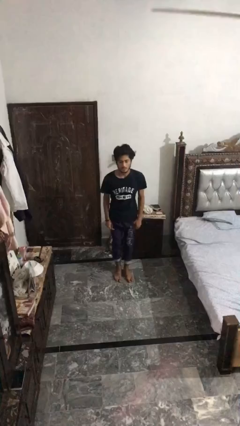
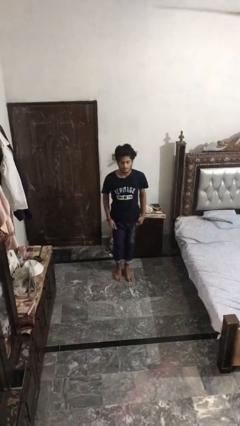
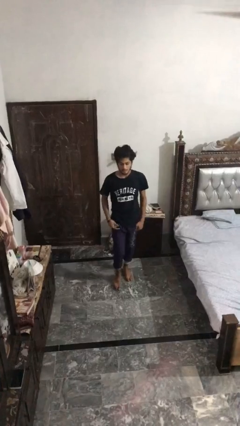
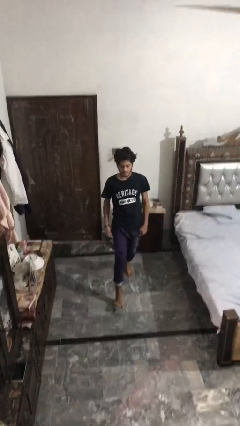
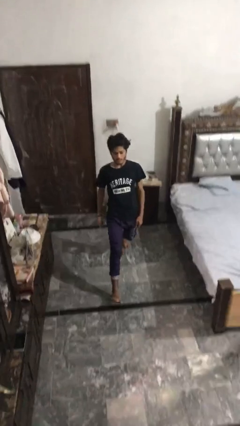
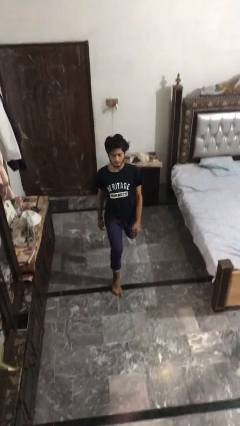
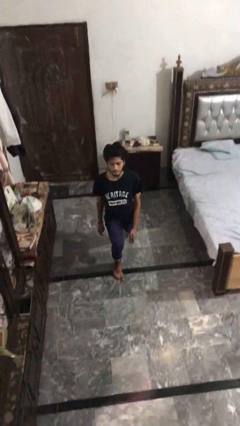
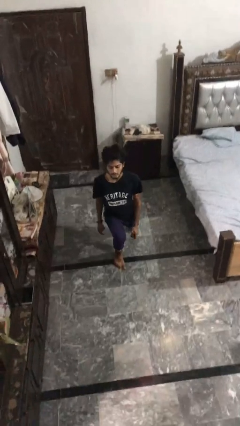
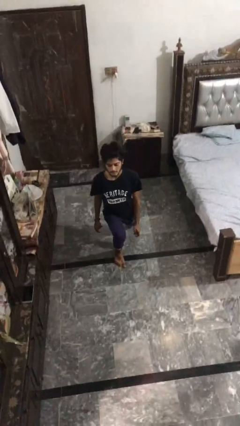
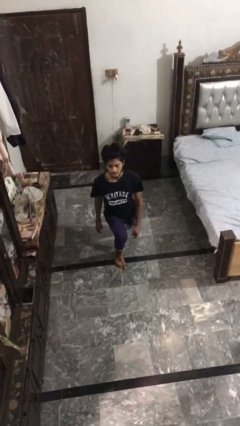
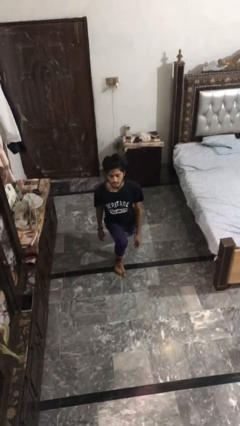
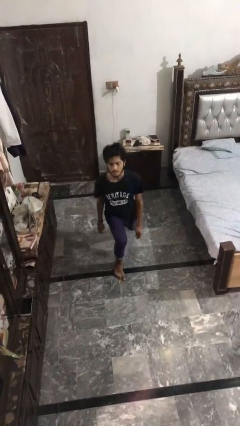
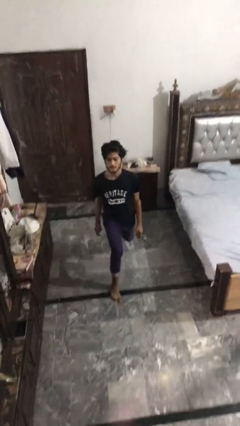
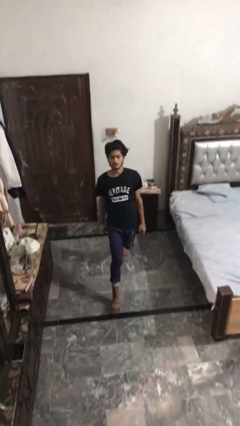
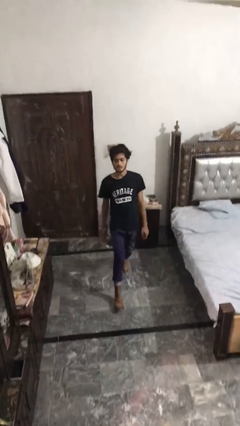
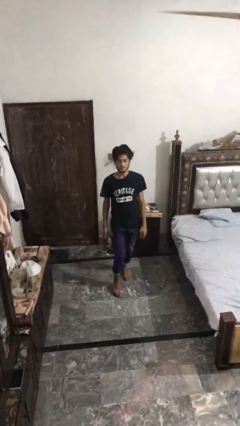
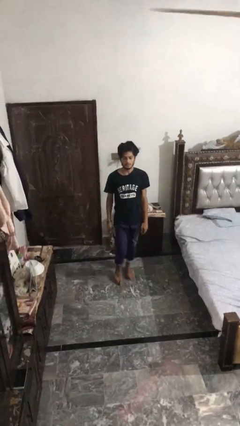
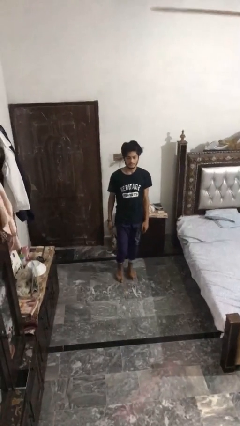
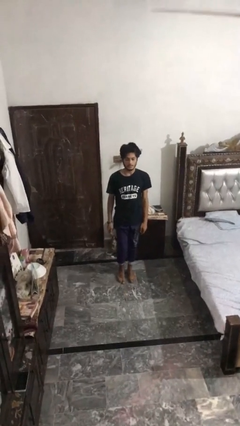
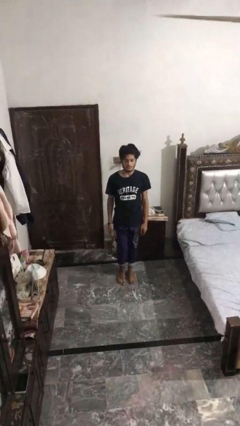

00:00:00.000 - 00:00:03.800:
person exercises with lunges

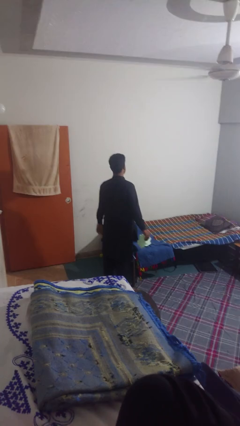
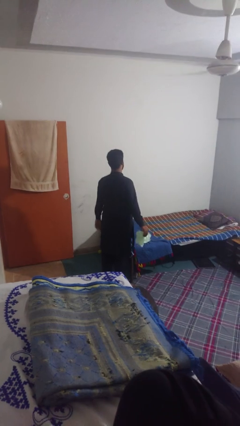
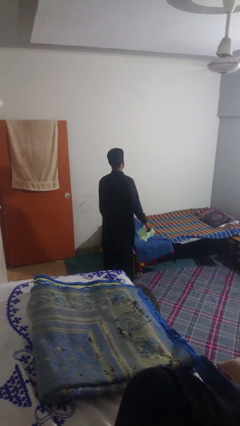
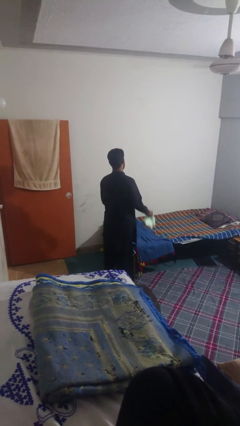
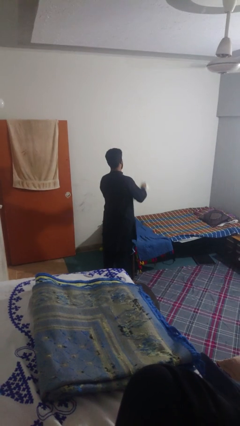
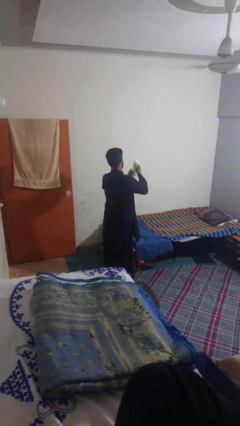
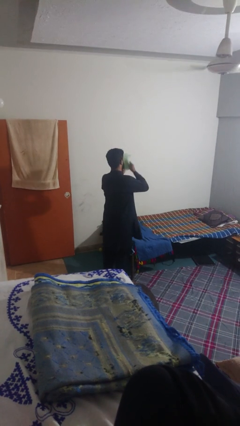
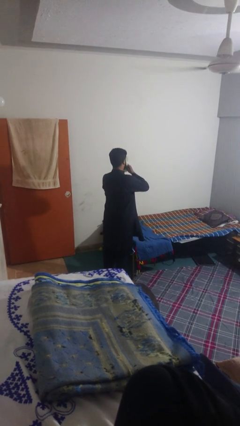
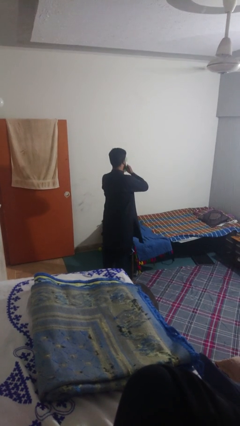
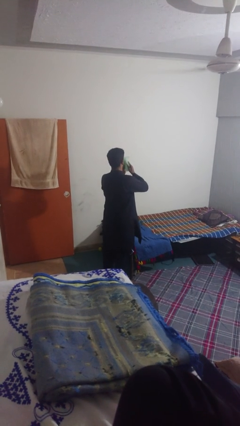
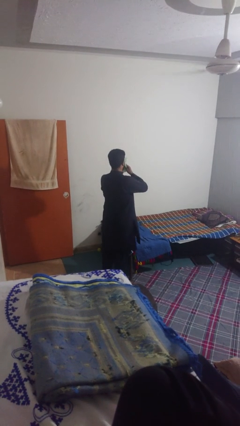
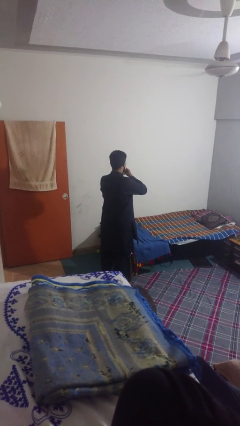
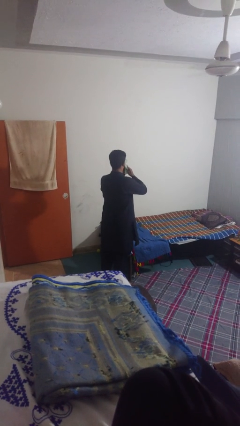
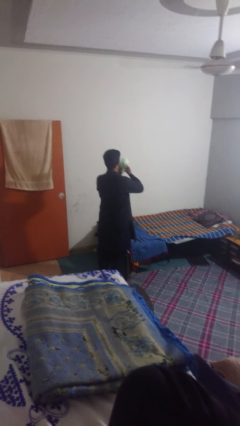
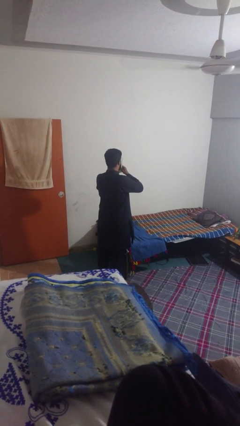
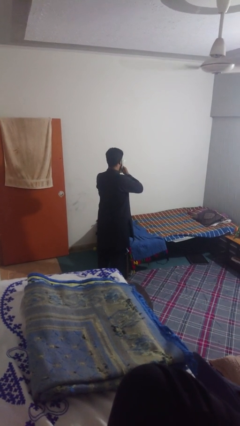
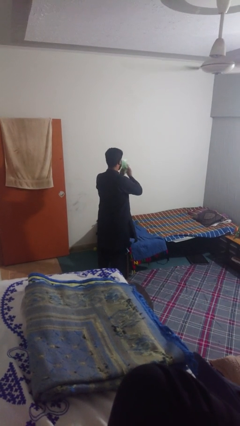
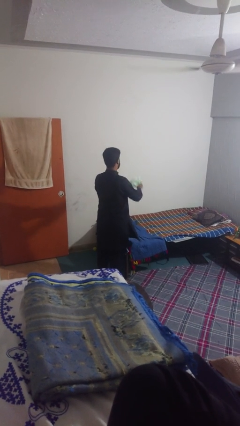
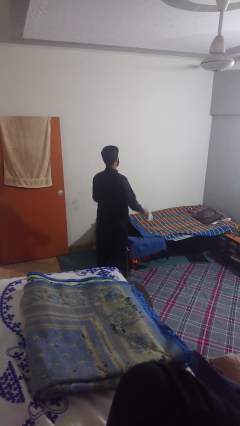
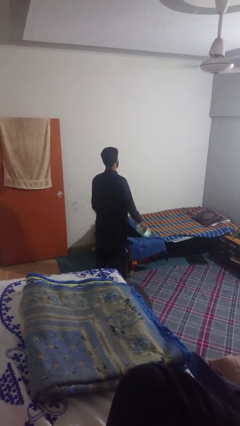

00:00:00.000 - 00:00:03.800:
person blows nose

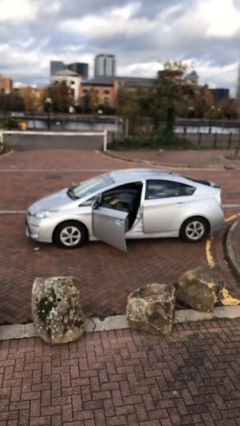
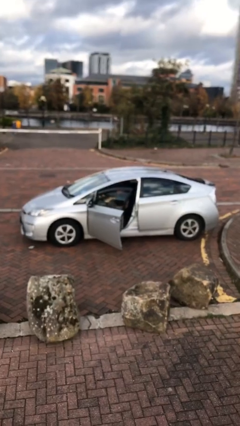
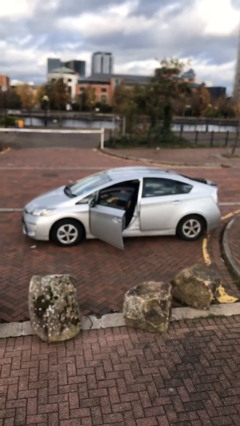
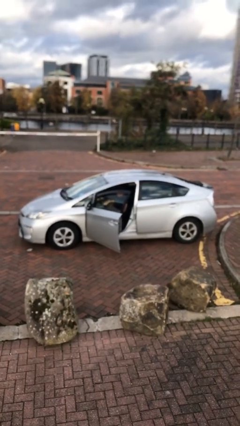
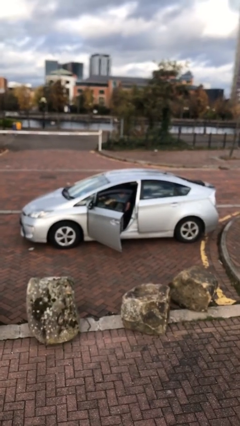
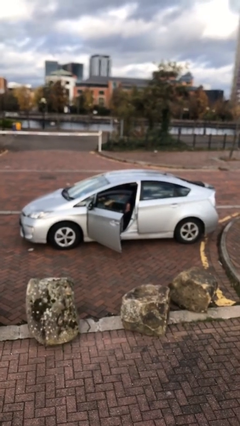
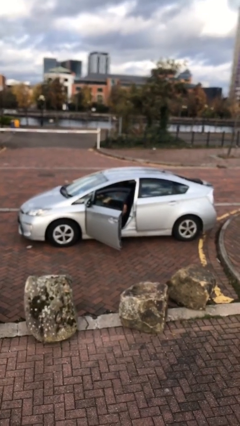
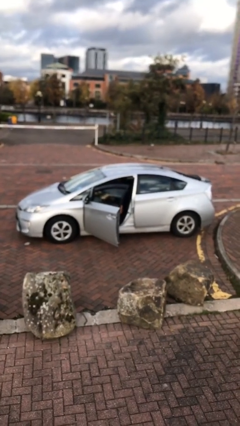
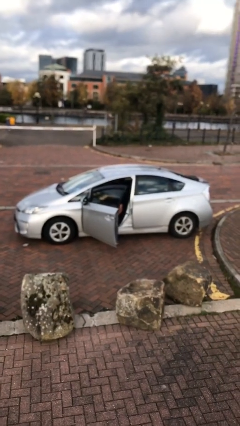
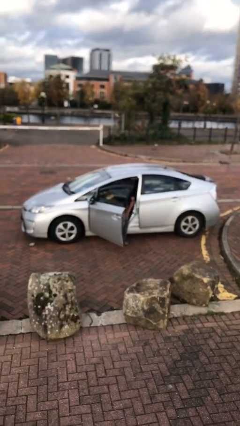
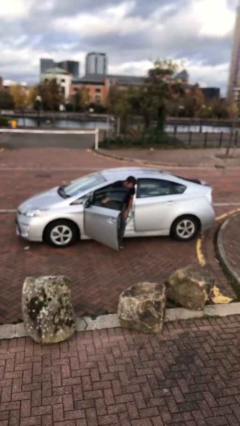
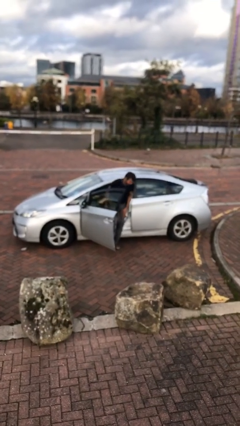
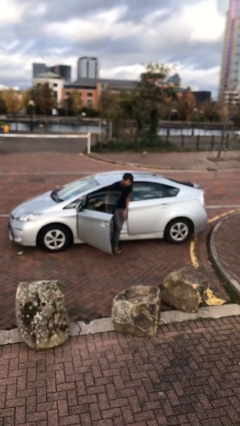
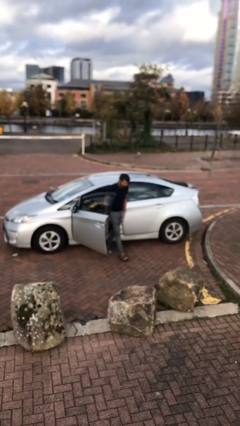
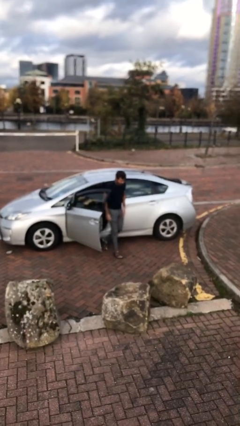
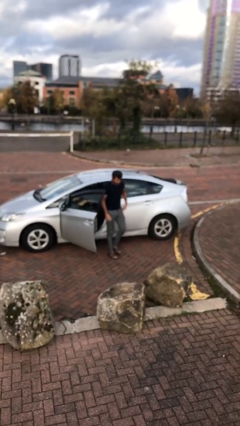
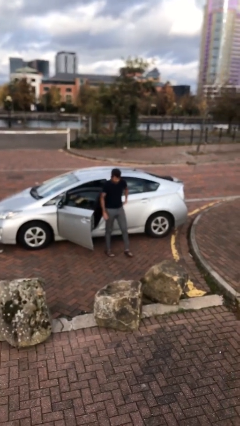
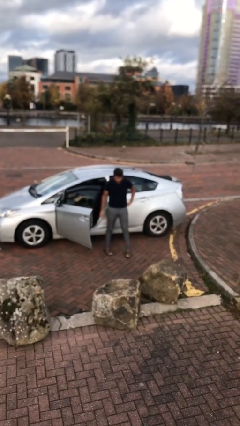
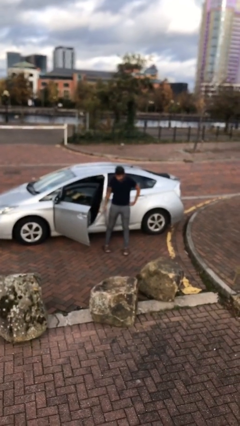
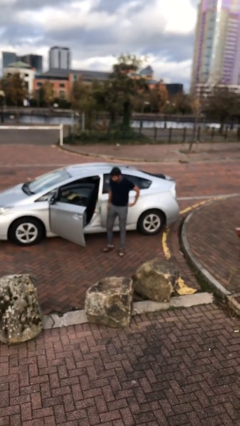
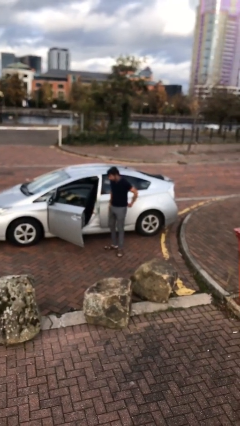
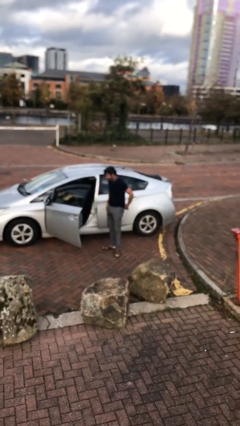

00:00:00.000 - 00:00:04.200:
person exits car

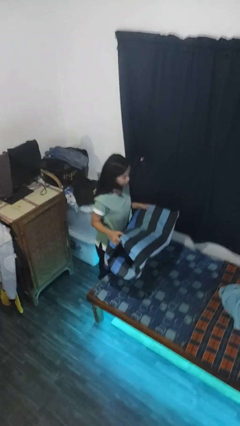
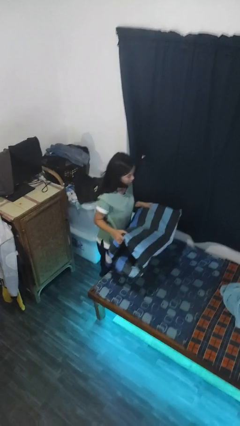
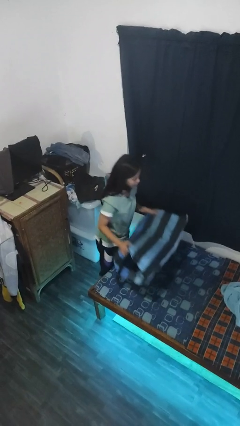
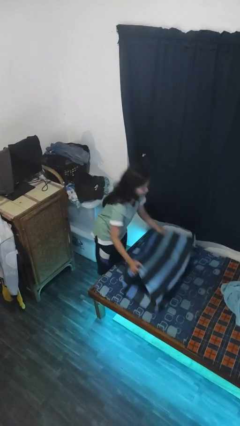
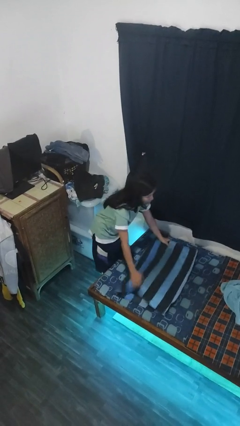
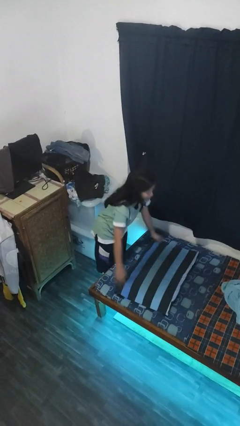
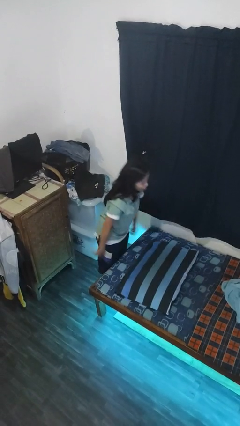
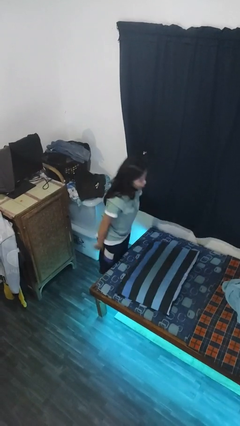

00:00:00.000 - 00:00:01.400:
person puts down object on bed

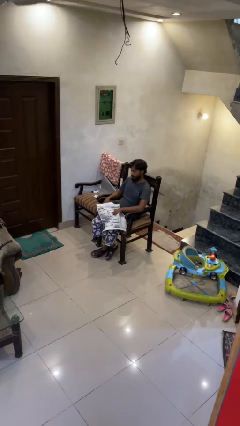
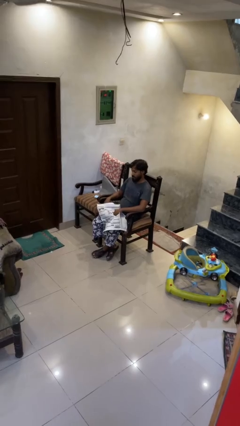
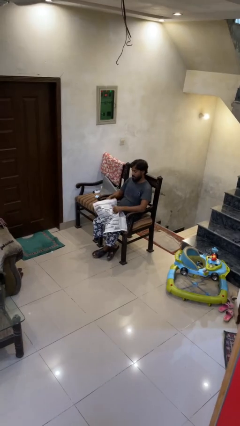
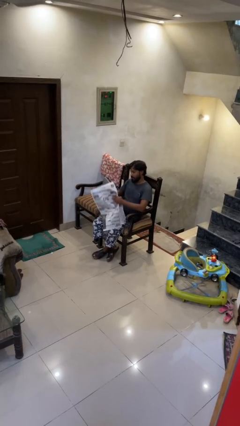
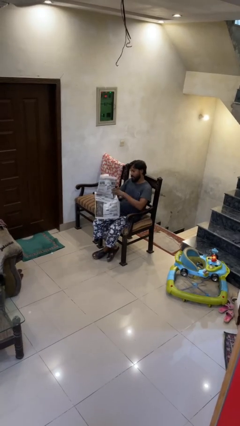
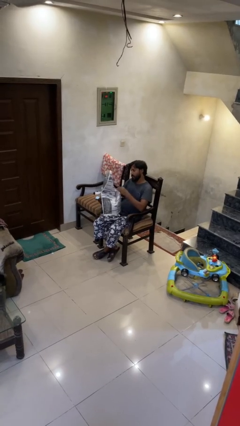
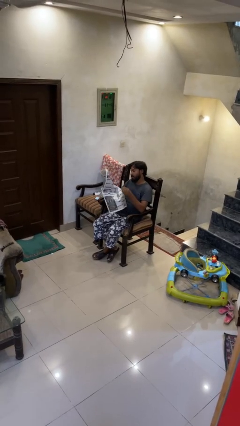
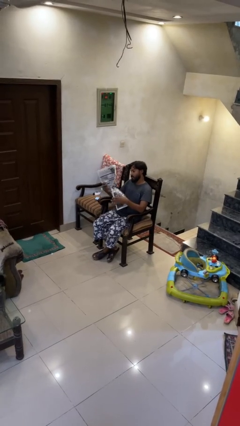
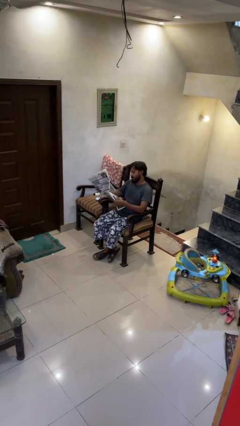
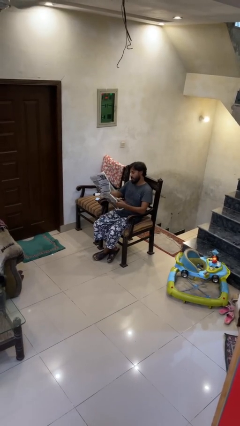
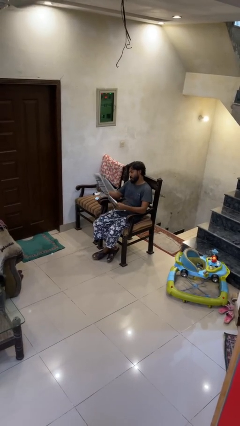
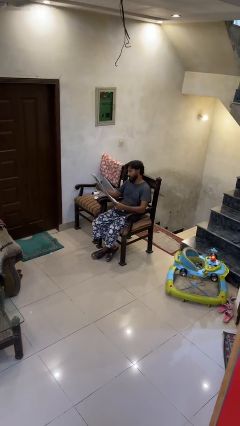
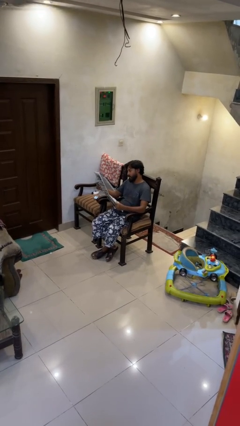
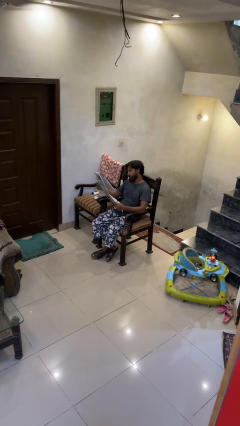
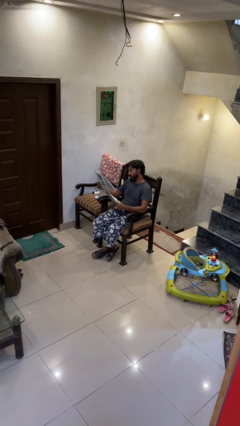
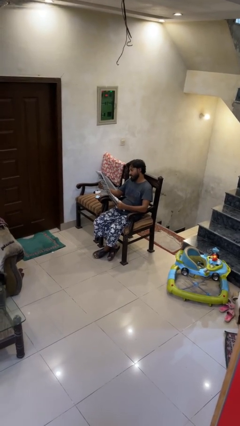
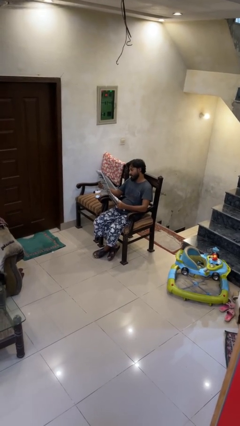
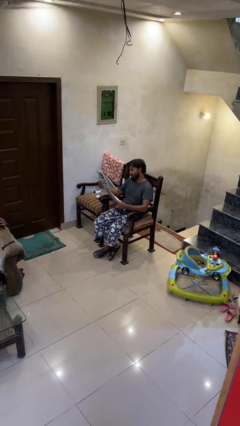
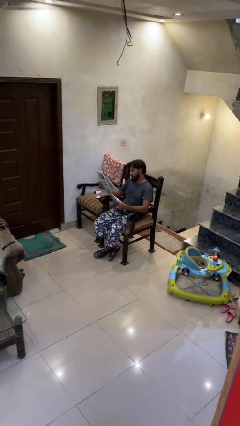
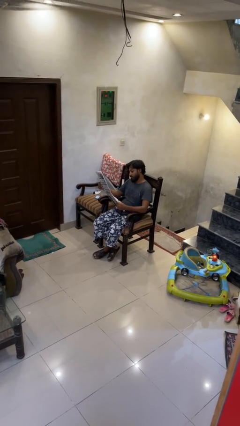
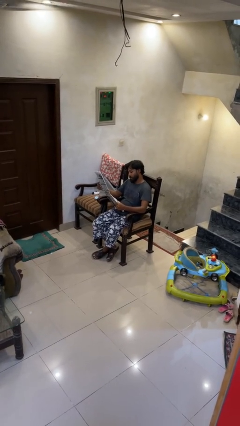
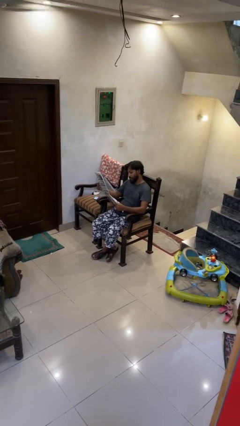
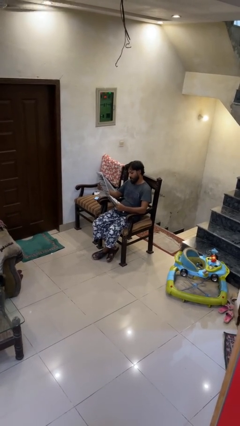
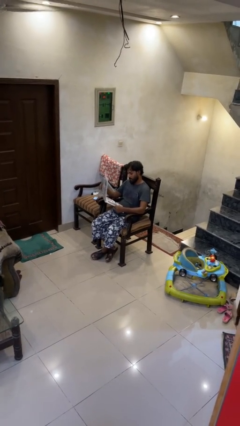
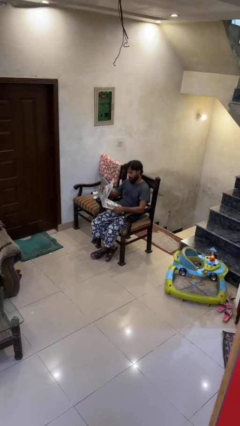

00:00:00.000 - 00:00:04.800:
person reads newspaper
